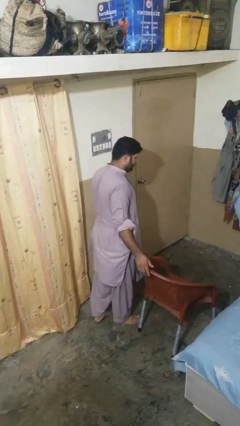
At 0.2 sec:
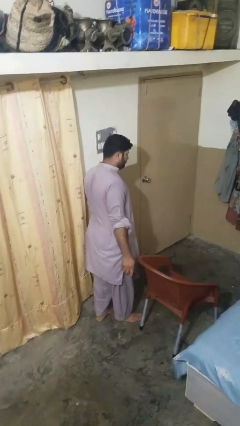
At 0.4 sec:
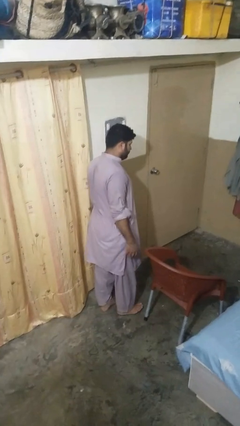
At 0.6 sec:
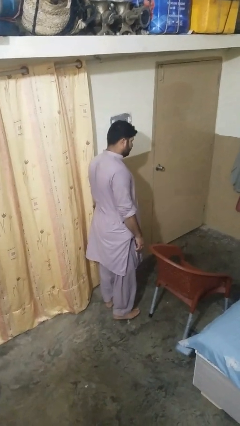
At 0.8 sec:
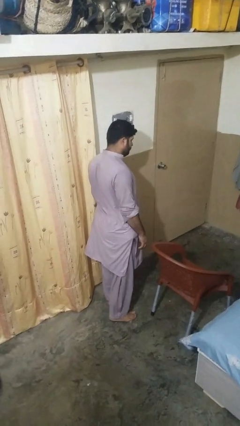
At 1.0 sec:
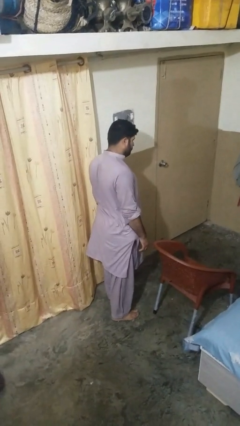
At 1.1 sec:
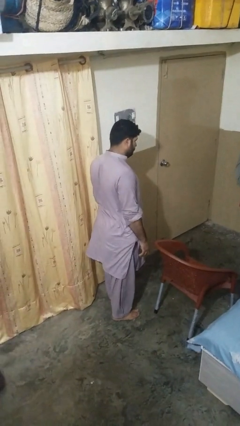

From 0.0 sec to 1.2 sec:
person knocks over furniture

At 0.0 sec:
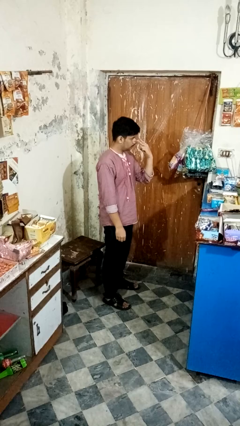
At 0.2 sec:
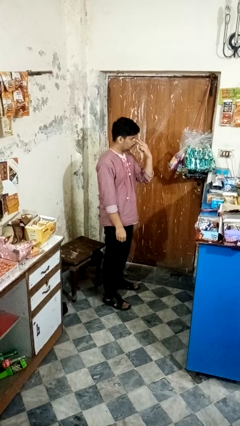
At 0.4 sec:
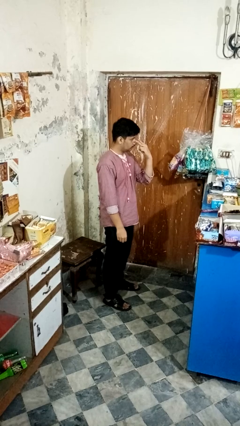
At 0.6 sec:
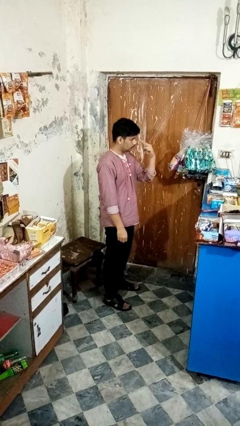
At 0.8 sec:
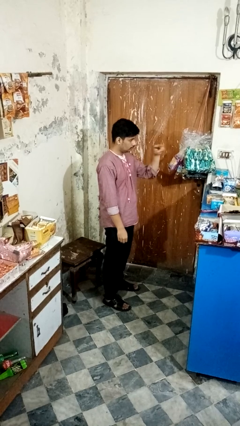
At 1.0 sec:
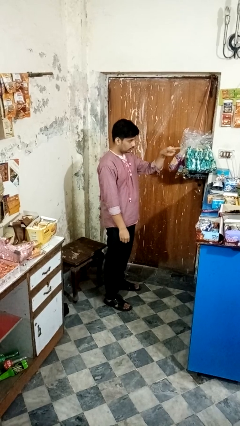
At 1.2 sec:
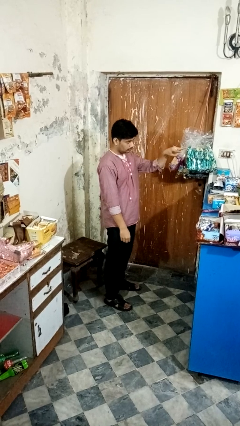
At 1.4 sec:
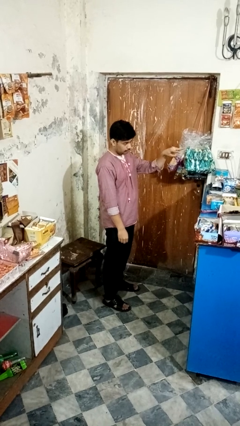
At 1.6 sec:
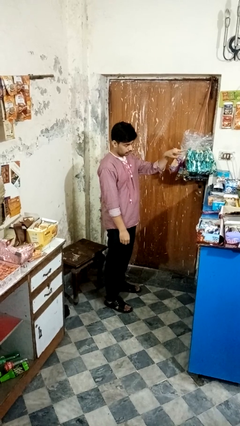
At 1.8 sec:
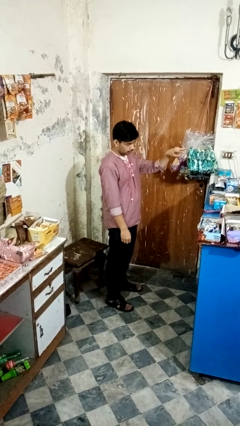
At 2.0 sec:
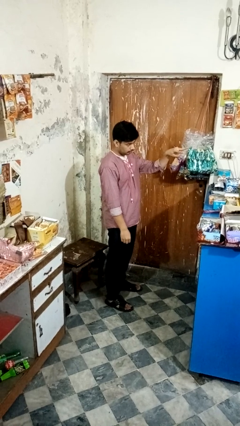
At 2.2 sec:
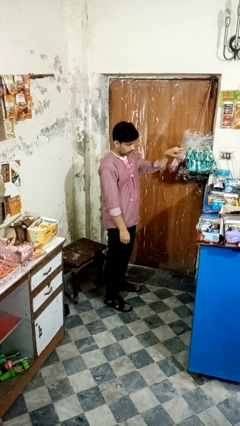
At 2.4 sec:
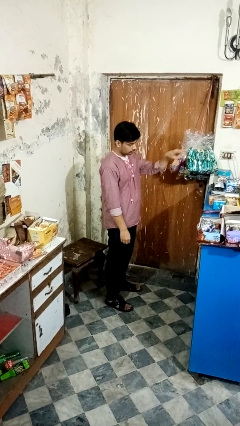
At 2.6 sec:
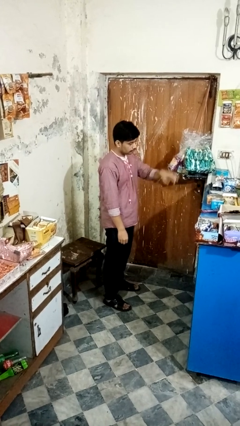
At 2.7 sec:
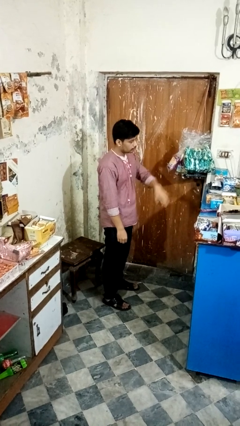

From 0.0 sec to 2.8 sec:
person gestures watch closely

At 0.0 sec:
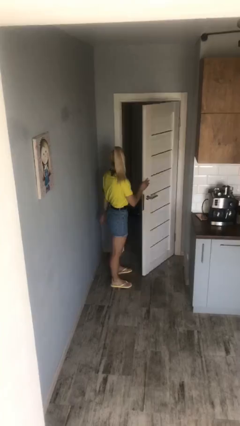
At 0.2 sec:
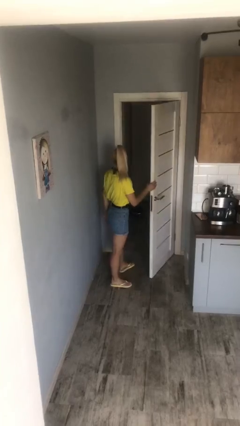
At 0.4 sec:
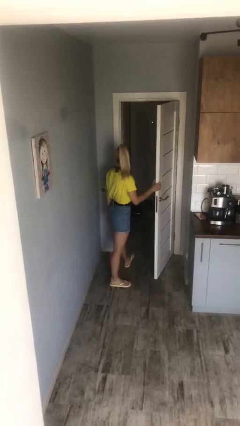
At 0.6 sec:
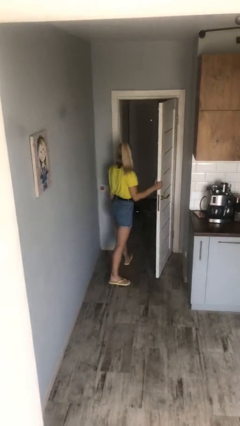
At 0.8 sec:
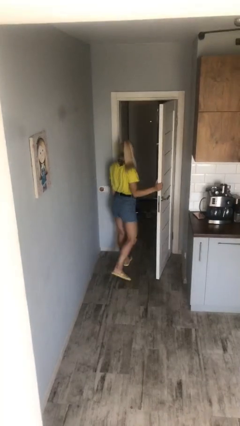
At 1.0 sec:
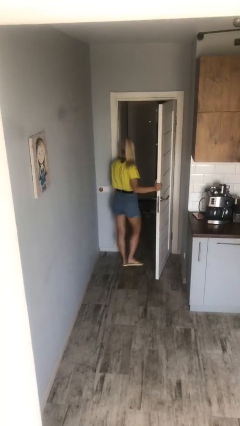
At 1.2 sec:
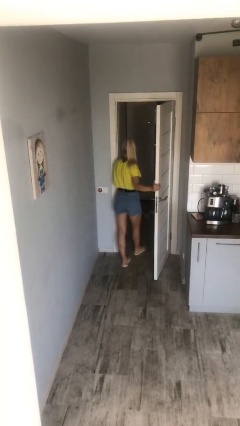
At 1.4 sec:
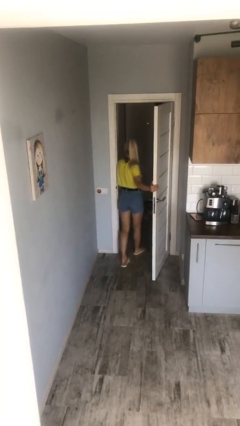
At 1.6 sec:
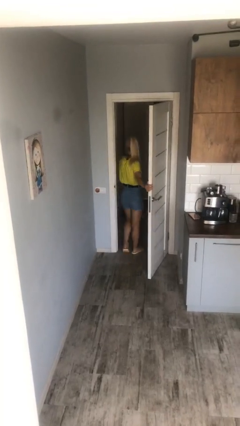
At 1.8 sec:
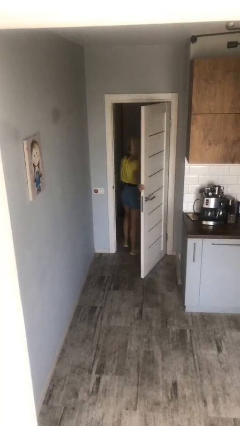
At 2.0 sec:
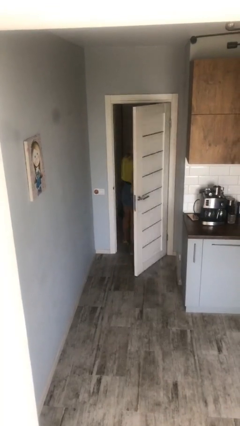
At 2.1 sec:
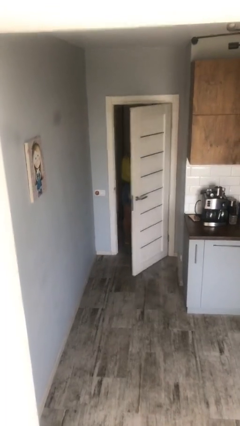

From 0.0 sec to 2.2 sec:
person exits scene through structure

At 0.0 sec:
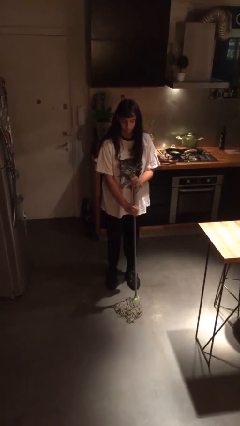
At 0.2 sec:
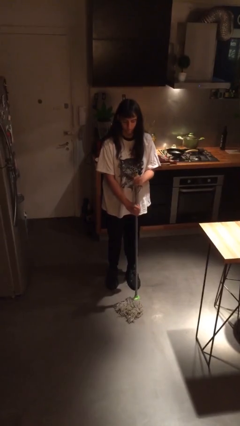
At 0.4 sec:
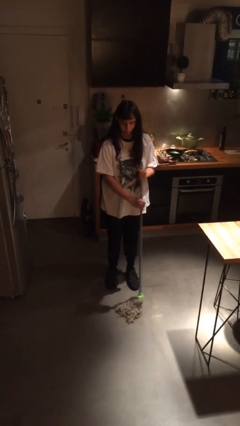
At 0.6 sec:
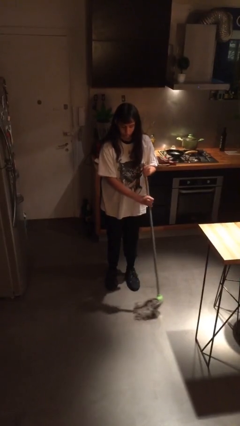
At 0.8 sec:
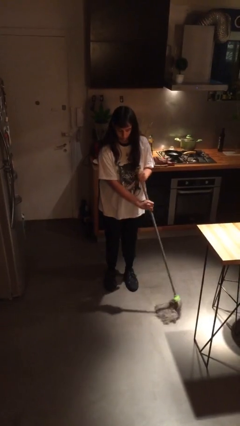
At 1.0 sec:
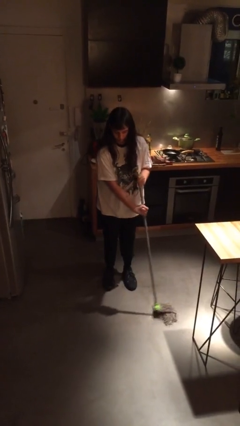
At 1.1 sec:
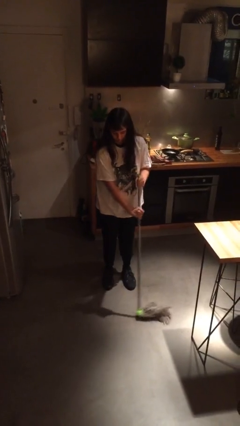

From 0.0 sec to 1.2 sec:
person mops

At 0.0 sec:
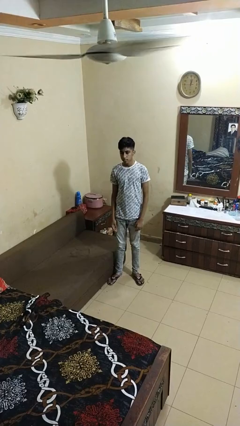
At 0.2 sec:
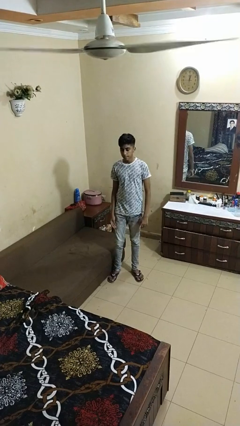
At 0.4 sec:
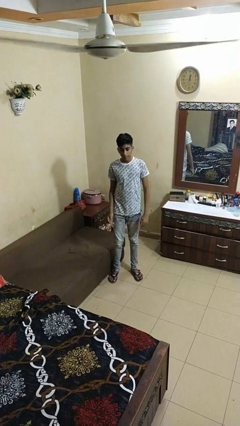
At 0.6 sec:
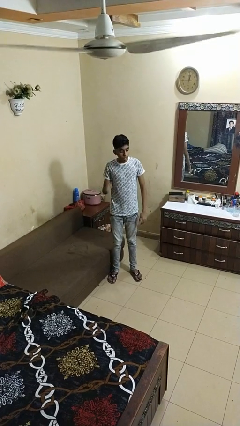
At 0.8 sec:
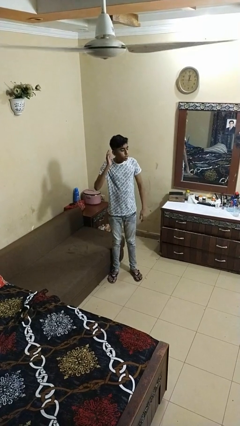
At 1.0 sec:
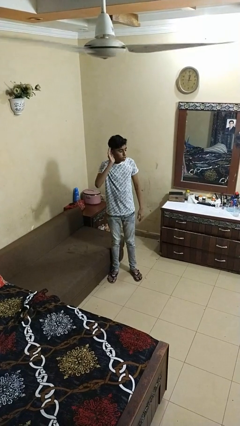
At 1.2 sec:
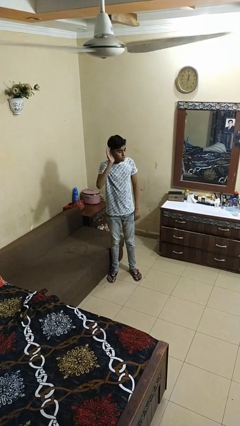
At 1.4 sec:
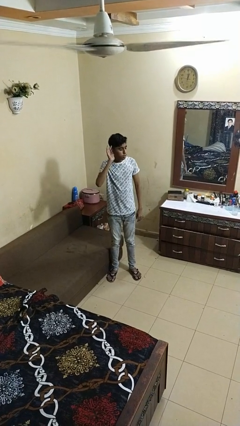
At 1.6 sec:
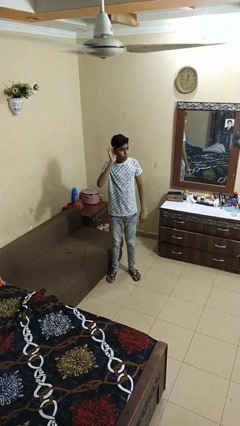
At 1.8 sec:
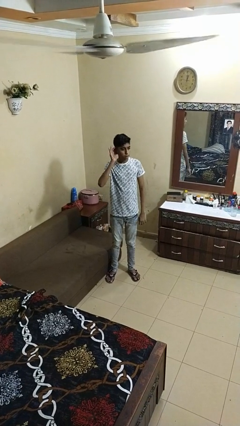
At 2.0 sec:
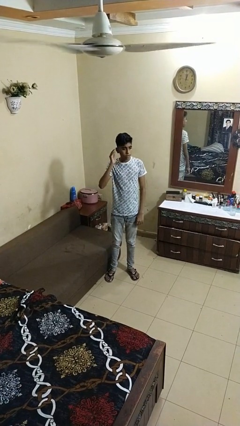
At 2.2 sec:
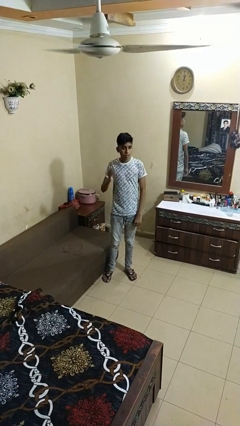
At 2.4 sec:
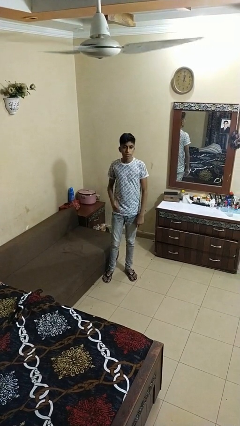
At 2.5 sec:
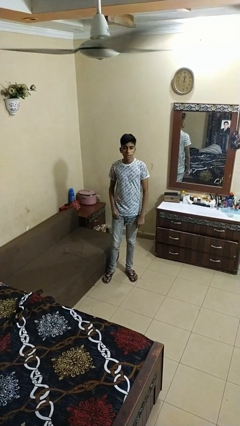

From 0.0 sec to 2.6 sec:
person gestures listen closely

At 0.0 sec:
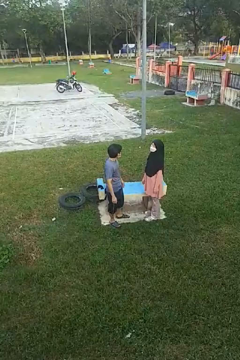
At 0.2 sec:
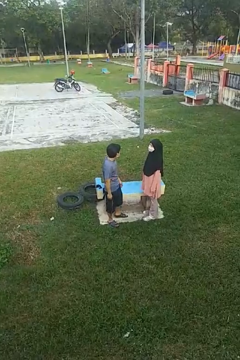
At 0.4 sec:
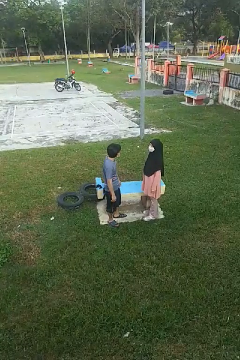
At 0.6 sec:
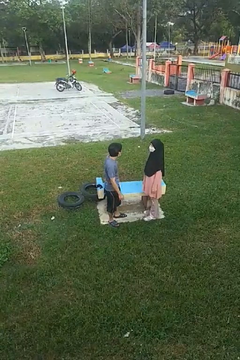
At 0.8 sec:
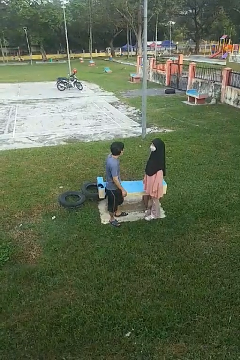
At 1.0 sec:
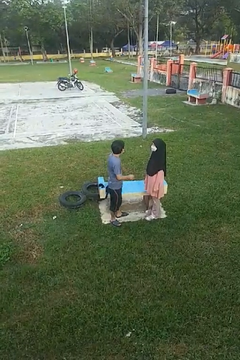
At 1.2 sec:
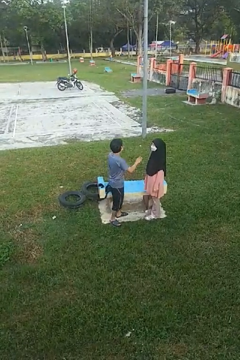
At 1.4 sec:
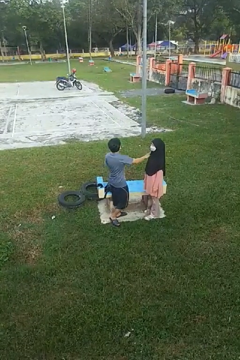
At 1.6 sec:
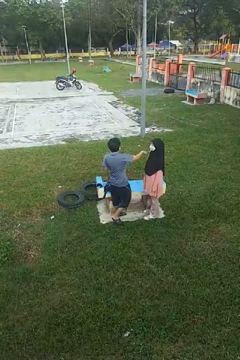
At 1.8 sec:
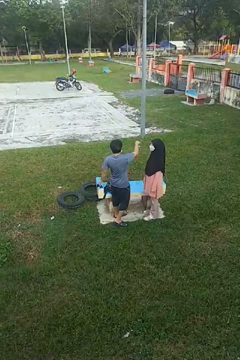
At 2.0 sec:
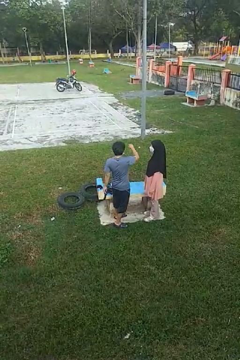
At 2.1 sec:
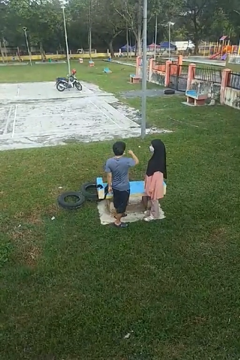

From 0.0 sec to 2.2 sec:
person shoves person

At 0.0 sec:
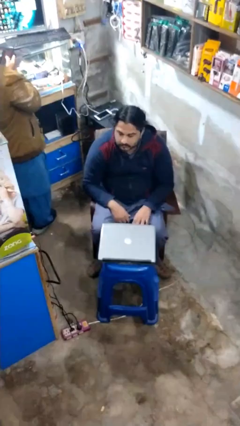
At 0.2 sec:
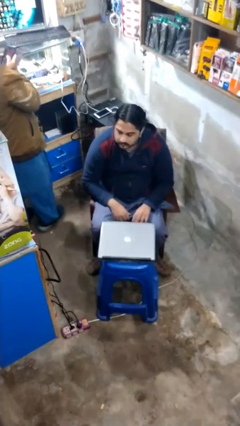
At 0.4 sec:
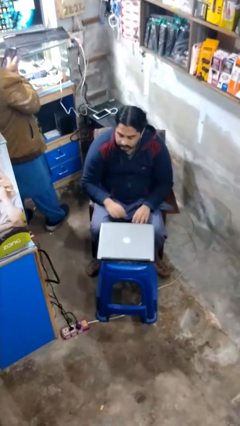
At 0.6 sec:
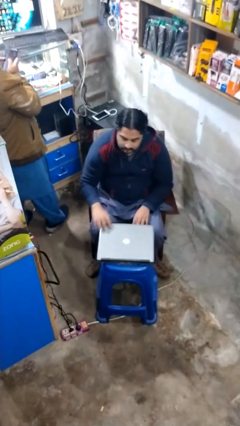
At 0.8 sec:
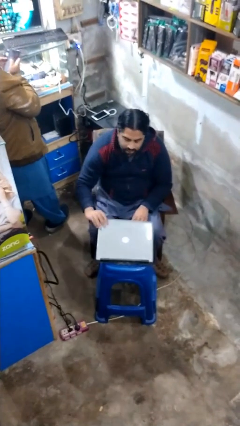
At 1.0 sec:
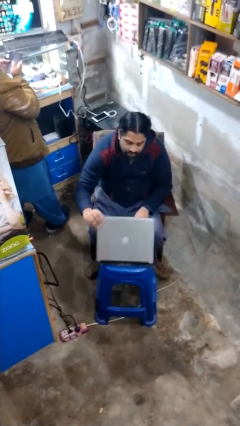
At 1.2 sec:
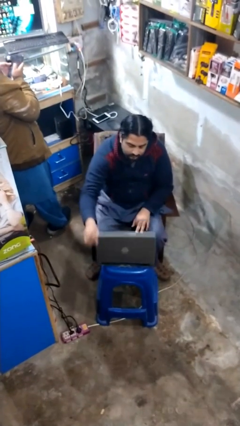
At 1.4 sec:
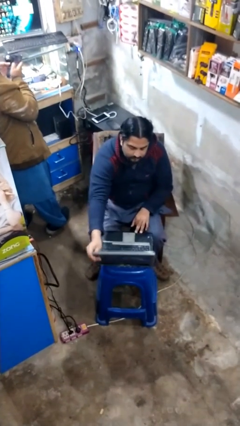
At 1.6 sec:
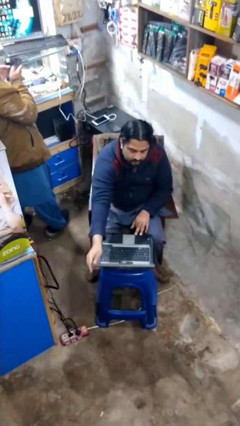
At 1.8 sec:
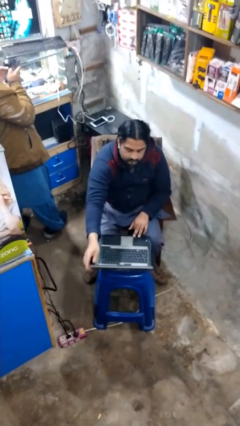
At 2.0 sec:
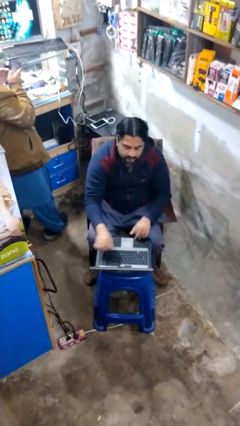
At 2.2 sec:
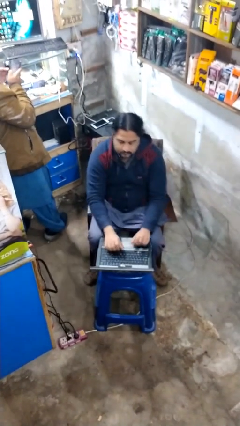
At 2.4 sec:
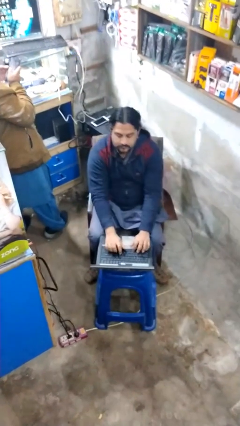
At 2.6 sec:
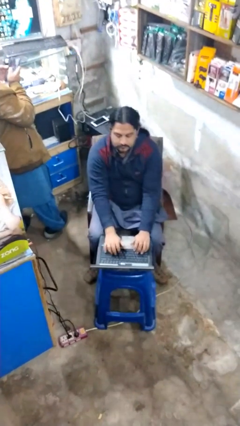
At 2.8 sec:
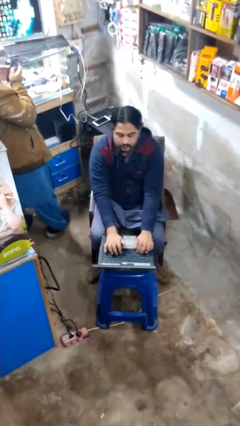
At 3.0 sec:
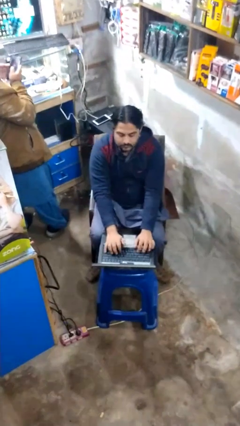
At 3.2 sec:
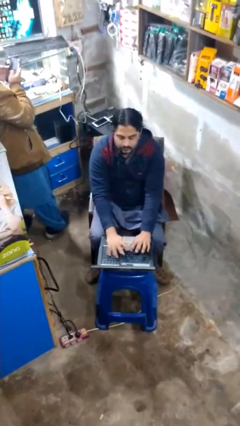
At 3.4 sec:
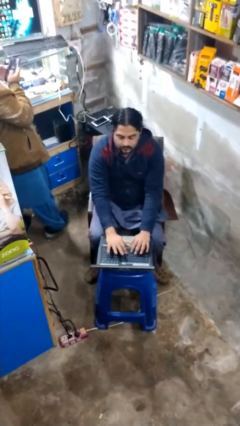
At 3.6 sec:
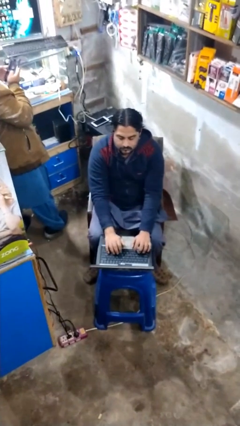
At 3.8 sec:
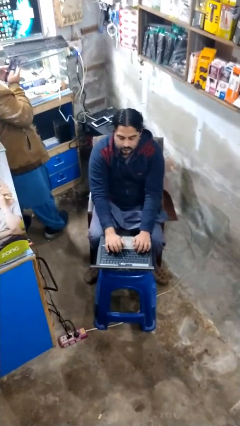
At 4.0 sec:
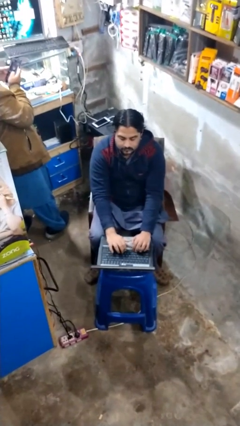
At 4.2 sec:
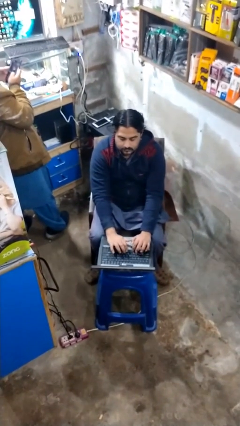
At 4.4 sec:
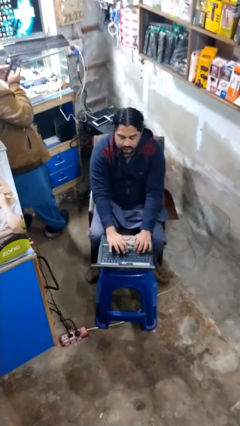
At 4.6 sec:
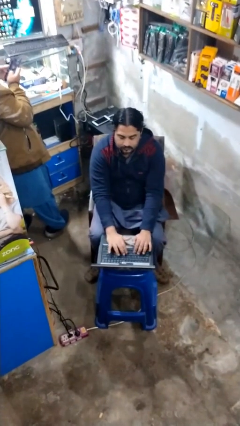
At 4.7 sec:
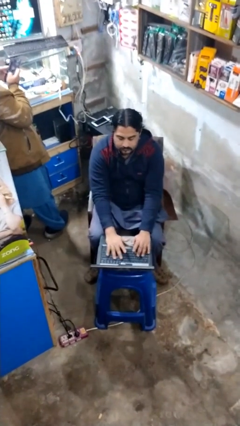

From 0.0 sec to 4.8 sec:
person interacts with laptop

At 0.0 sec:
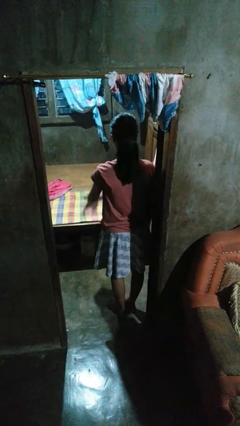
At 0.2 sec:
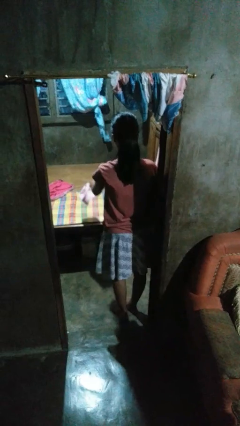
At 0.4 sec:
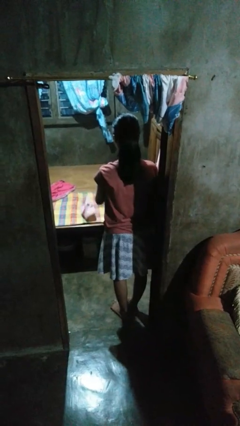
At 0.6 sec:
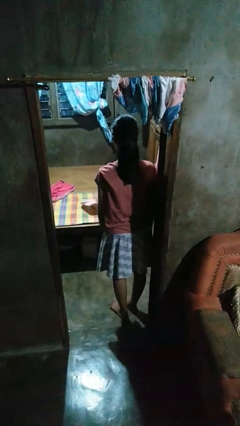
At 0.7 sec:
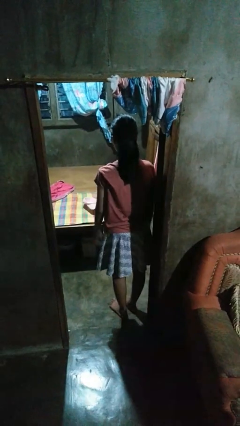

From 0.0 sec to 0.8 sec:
person throws object on bed
